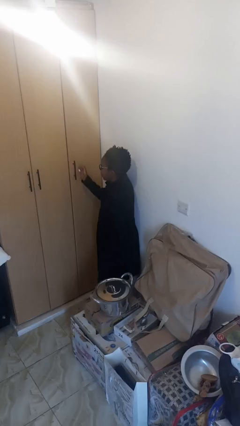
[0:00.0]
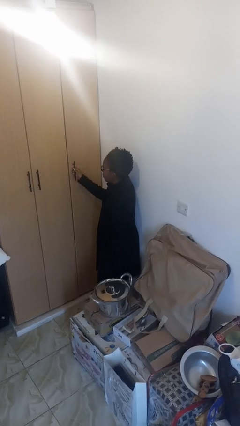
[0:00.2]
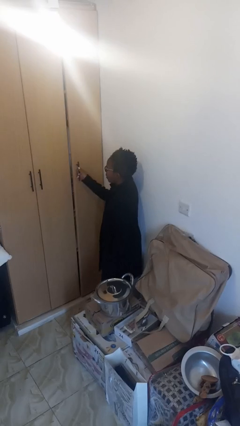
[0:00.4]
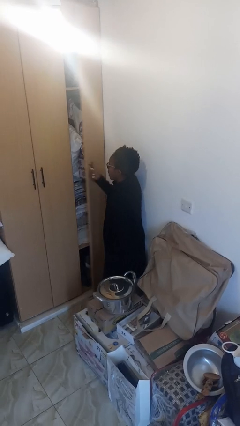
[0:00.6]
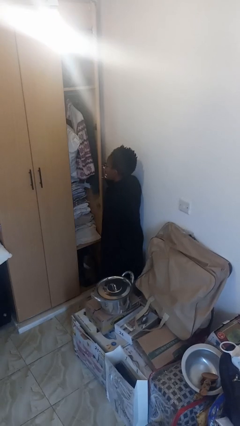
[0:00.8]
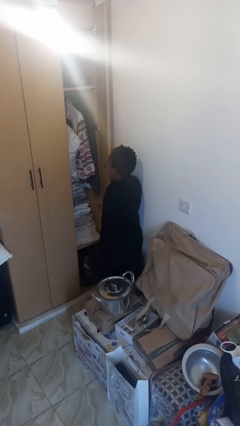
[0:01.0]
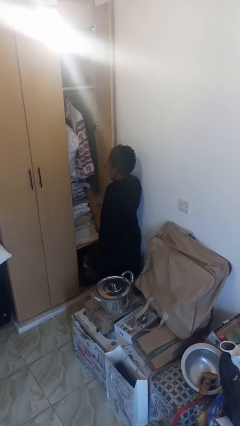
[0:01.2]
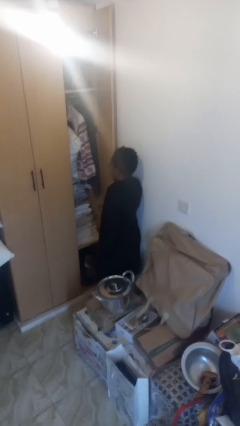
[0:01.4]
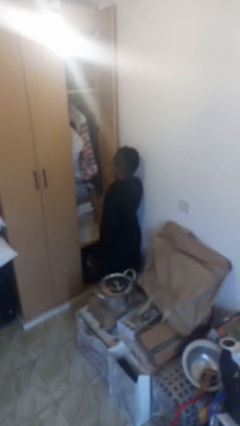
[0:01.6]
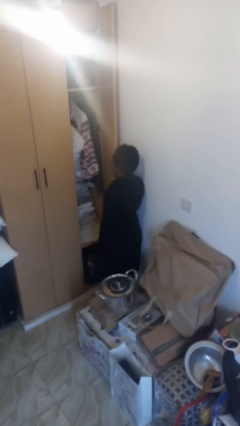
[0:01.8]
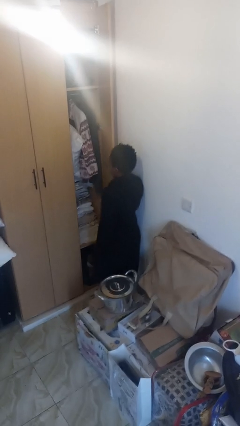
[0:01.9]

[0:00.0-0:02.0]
person opens closet door

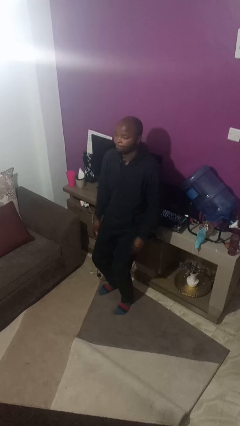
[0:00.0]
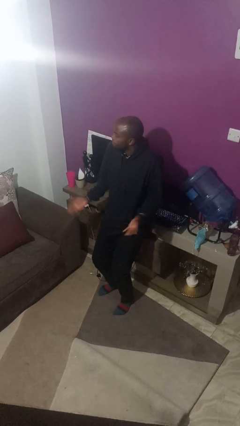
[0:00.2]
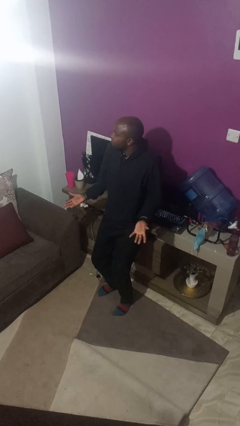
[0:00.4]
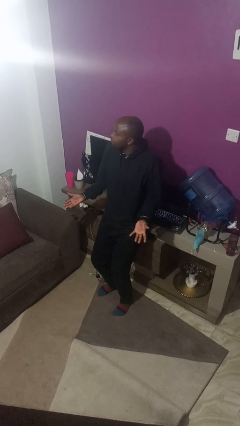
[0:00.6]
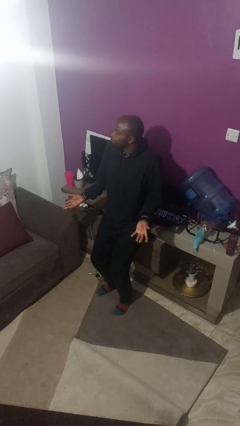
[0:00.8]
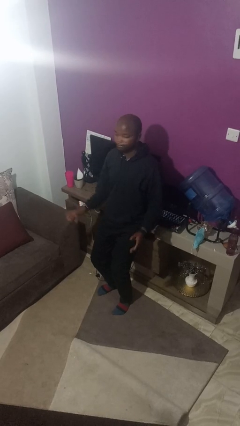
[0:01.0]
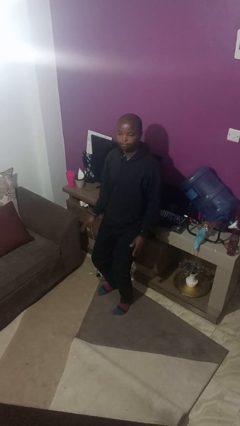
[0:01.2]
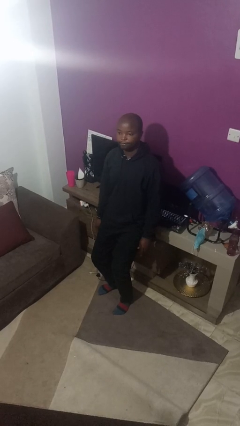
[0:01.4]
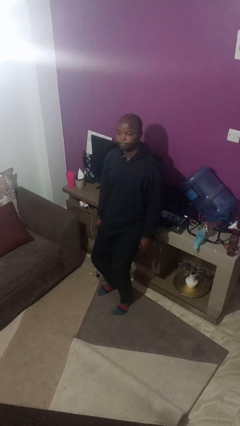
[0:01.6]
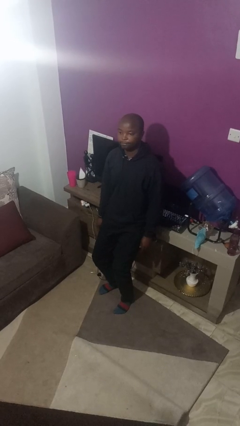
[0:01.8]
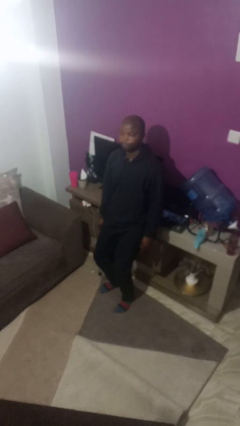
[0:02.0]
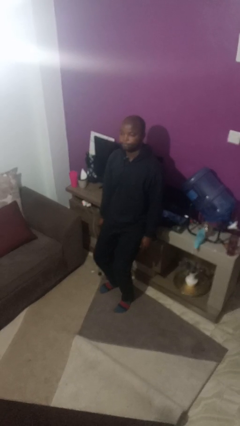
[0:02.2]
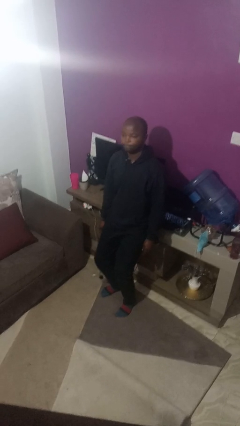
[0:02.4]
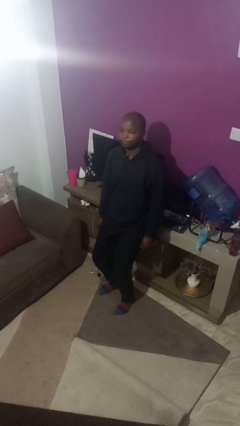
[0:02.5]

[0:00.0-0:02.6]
person shrugs

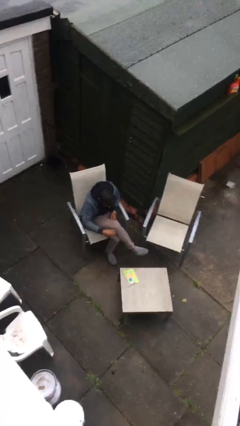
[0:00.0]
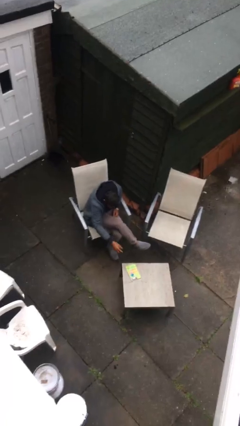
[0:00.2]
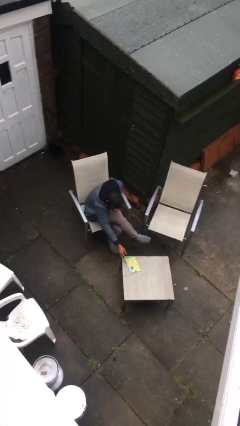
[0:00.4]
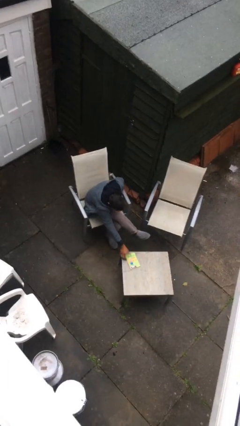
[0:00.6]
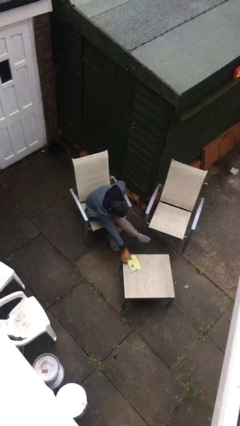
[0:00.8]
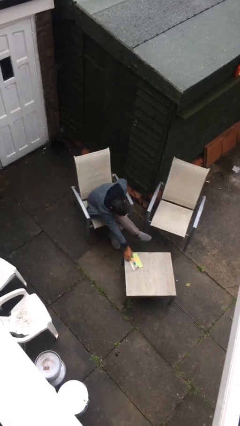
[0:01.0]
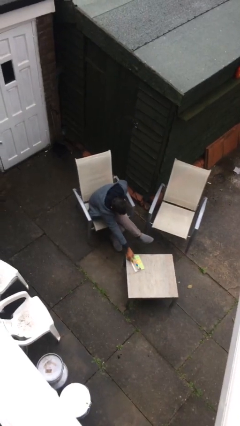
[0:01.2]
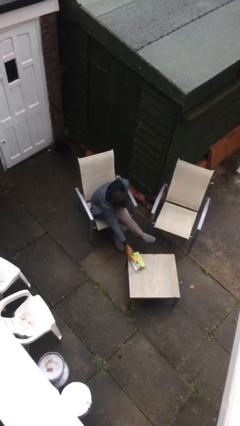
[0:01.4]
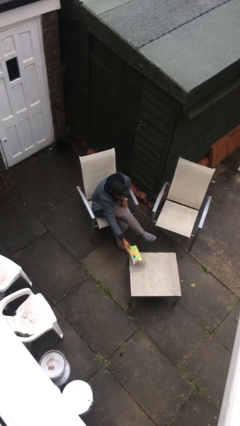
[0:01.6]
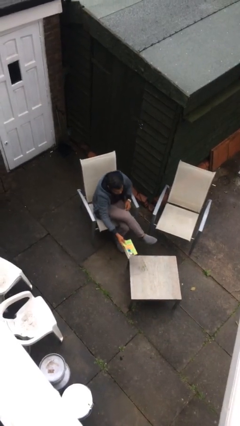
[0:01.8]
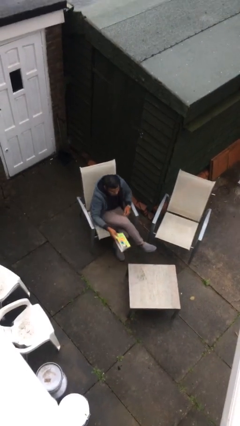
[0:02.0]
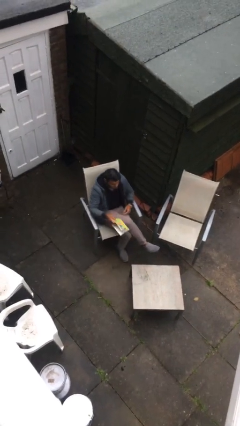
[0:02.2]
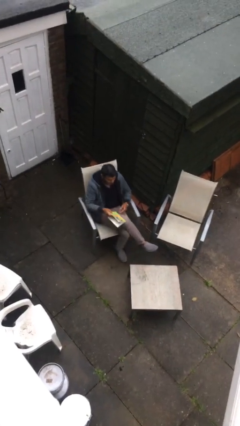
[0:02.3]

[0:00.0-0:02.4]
person picks up object from table

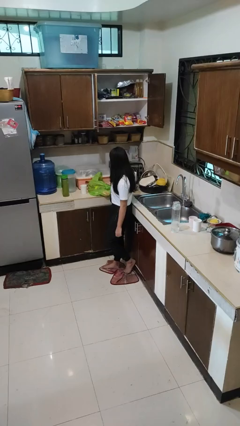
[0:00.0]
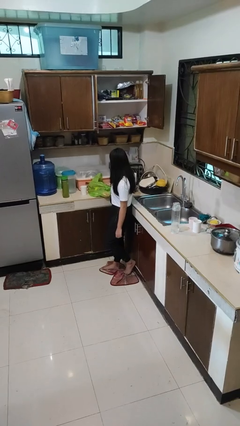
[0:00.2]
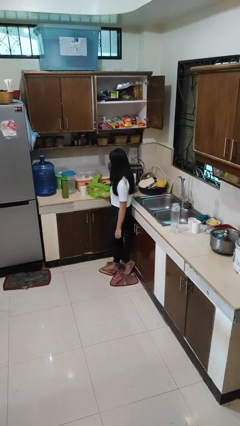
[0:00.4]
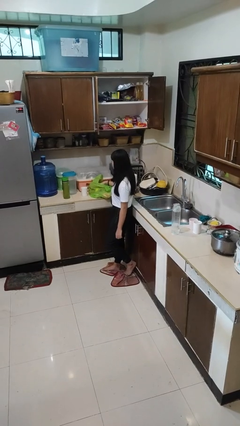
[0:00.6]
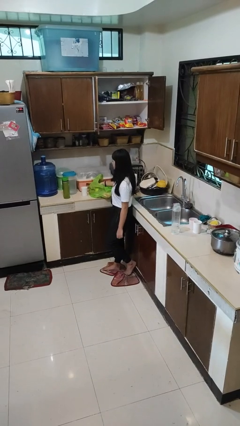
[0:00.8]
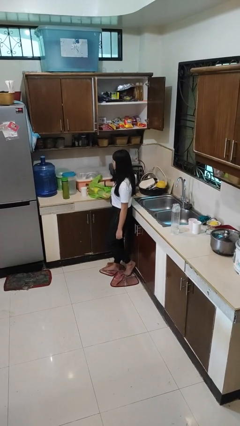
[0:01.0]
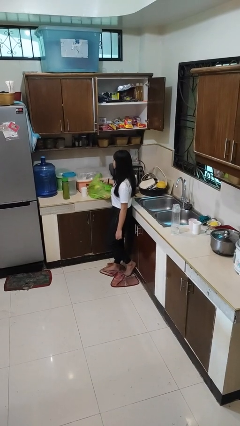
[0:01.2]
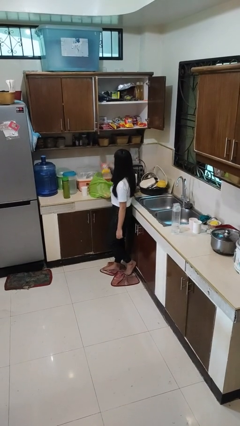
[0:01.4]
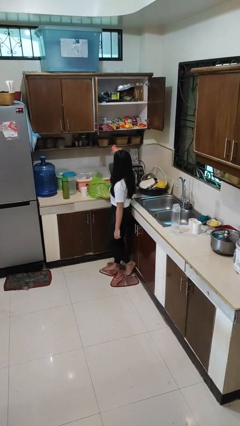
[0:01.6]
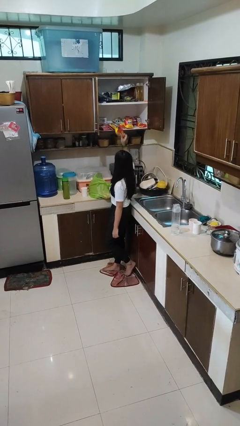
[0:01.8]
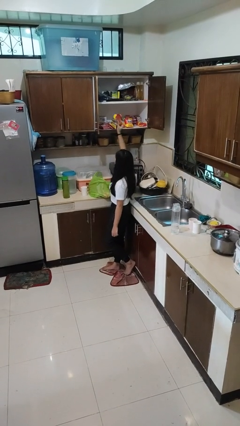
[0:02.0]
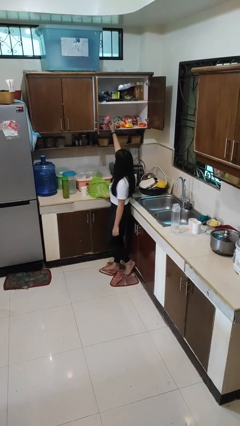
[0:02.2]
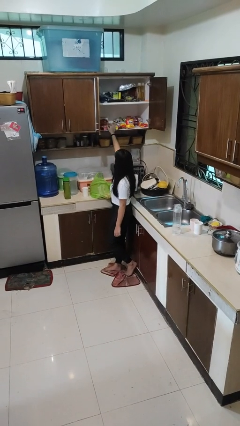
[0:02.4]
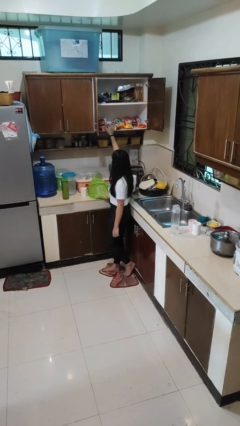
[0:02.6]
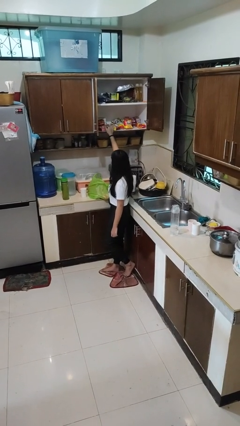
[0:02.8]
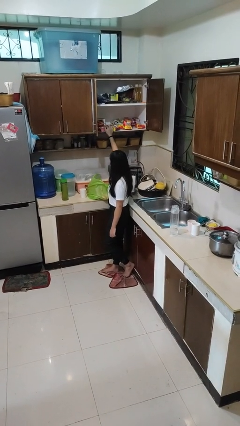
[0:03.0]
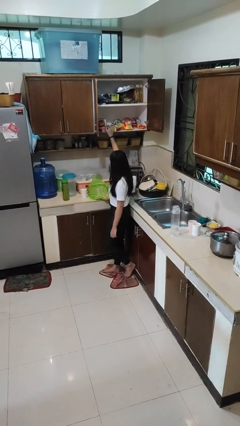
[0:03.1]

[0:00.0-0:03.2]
person loads groceries into cabinet

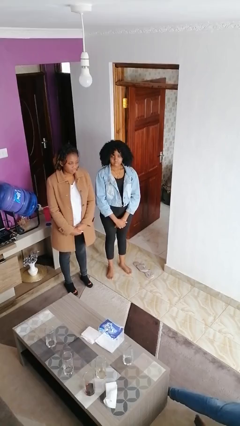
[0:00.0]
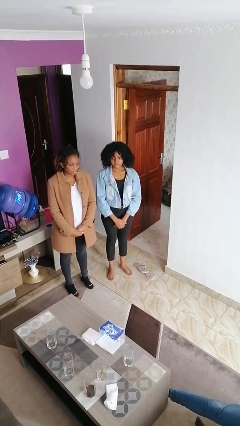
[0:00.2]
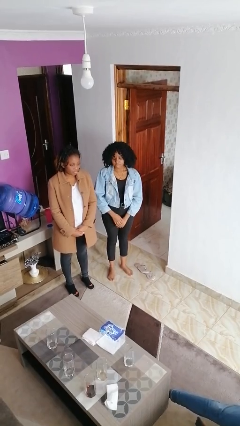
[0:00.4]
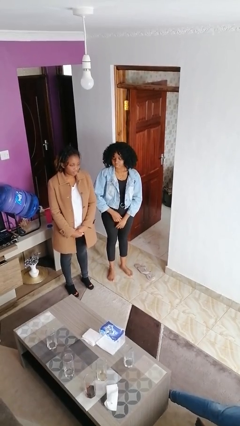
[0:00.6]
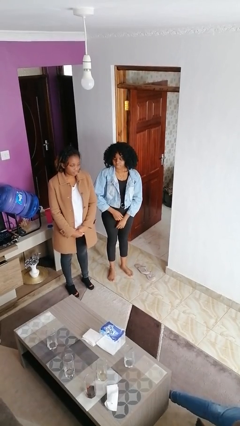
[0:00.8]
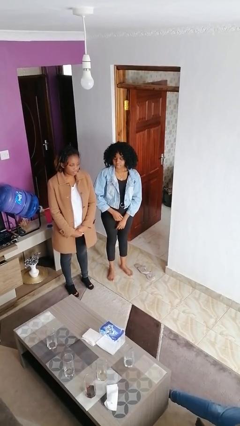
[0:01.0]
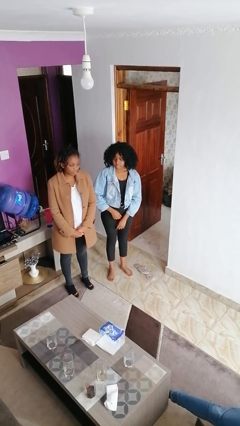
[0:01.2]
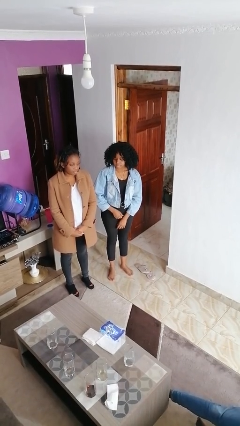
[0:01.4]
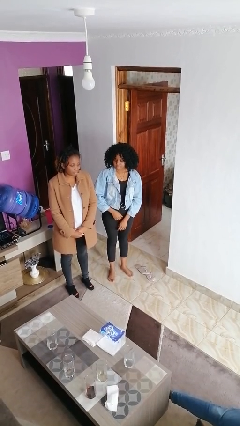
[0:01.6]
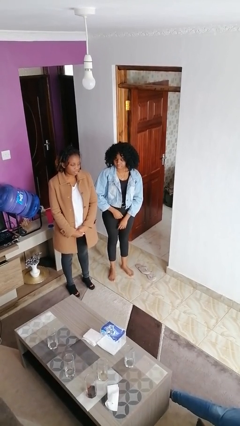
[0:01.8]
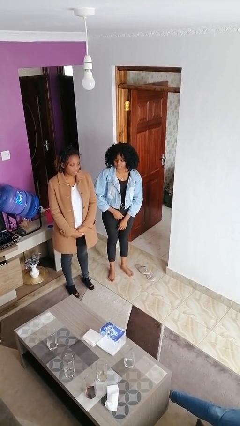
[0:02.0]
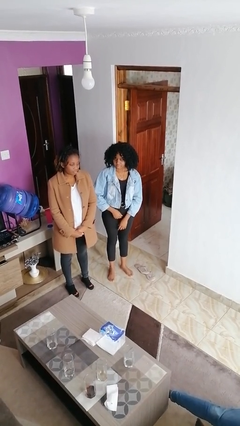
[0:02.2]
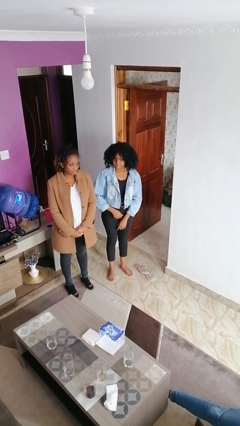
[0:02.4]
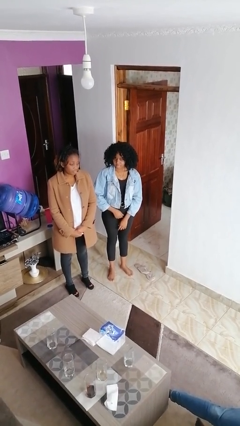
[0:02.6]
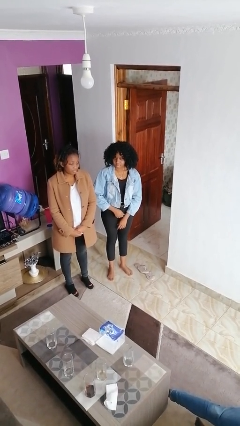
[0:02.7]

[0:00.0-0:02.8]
person nudges person with elbow

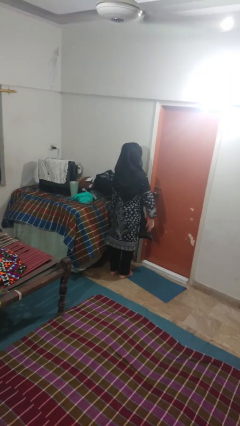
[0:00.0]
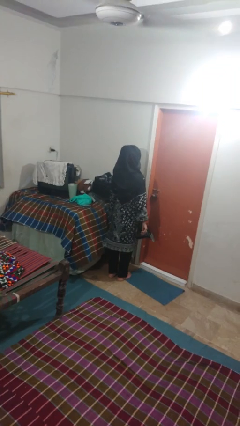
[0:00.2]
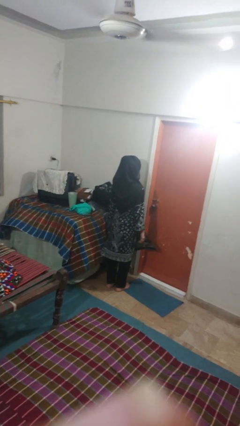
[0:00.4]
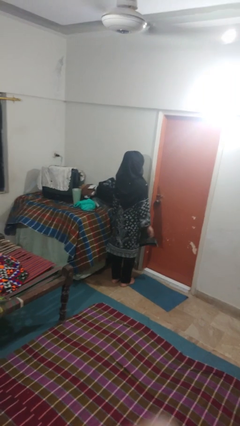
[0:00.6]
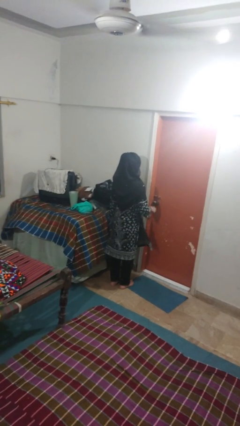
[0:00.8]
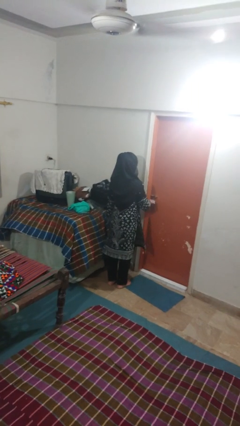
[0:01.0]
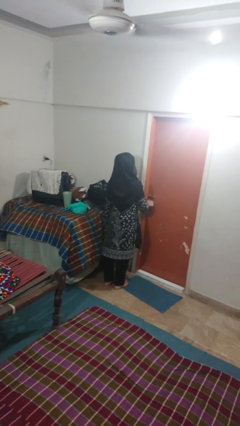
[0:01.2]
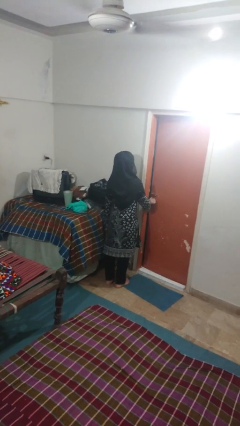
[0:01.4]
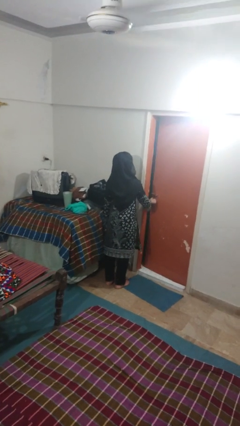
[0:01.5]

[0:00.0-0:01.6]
person opens facility door

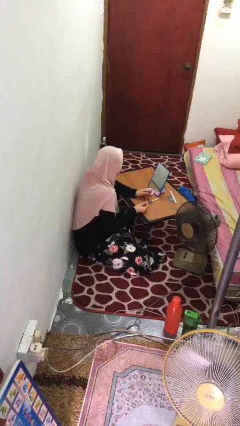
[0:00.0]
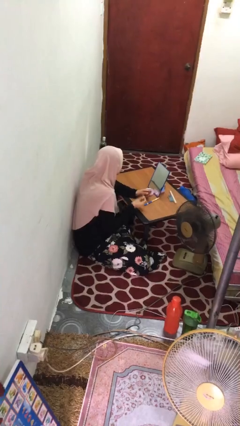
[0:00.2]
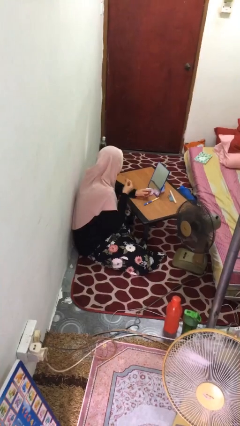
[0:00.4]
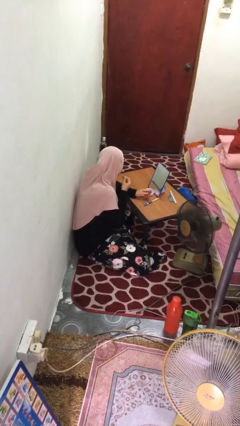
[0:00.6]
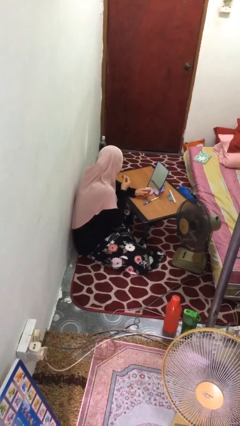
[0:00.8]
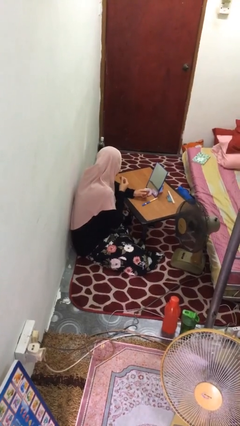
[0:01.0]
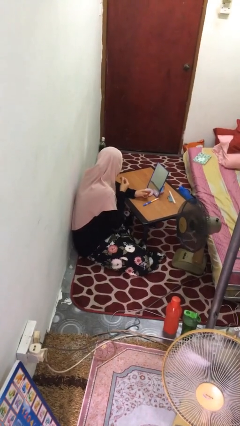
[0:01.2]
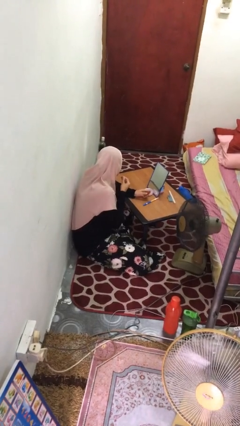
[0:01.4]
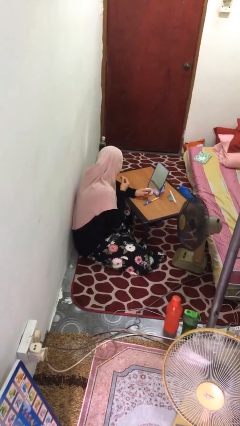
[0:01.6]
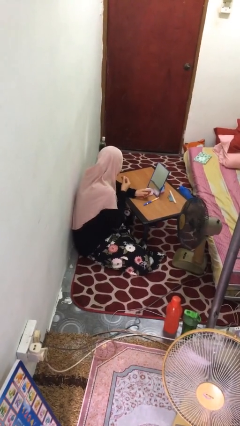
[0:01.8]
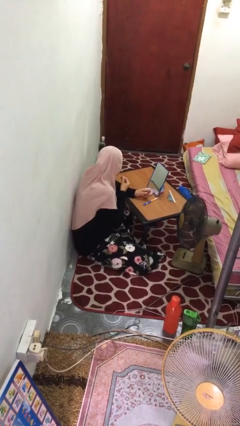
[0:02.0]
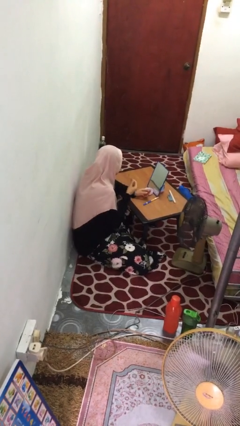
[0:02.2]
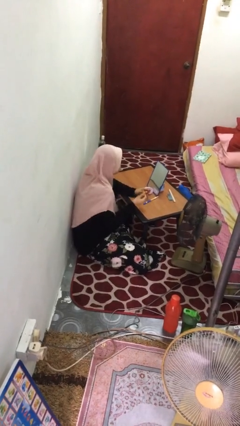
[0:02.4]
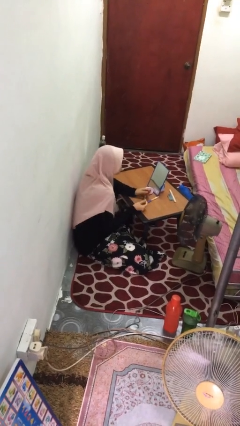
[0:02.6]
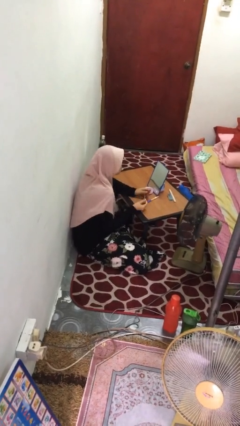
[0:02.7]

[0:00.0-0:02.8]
person applies lip makeup
